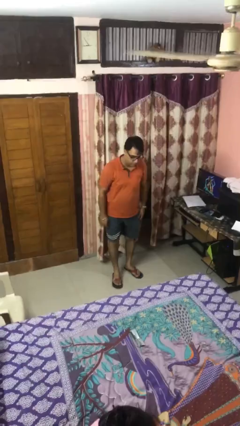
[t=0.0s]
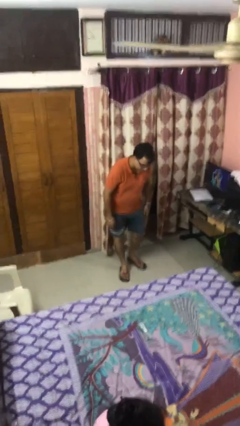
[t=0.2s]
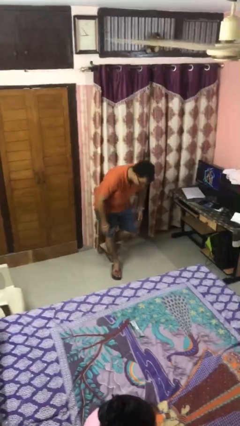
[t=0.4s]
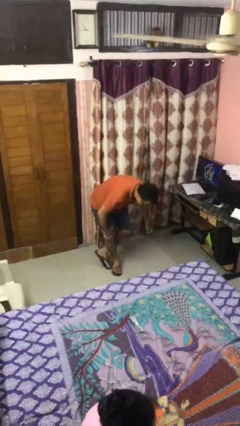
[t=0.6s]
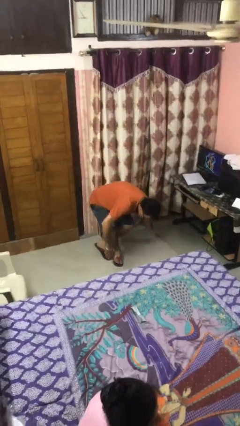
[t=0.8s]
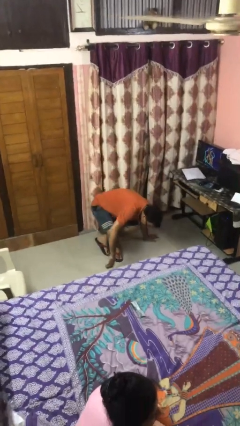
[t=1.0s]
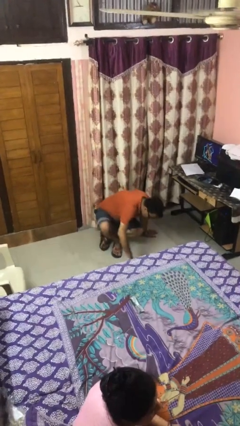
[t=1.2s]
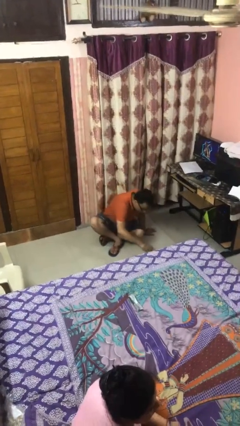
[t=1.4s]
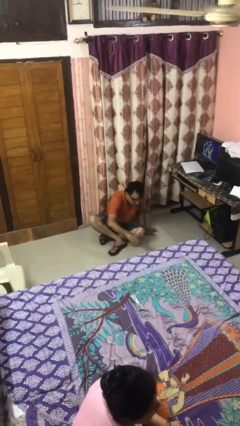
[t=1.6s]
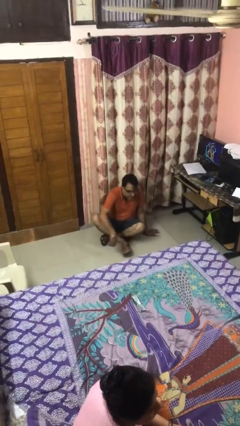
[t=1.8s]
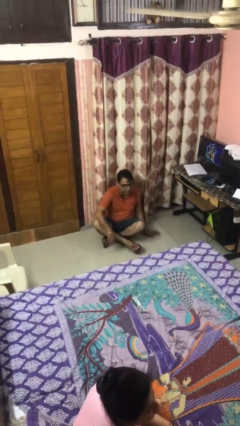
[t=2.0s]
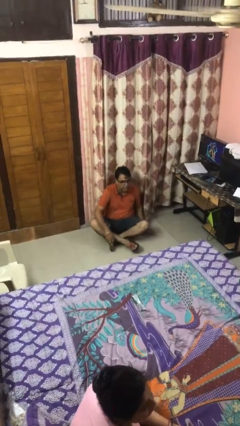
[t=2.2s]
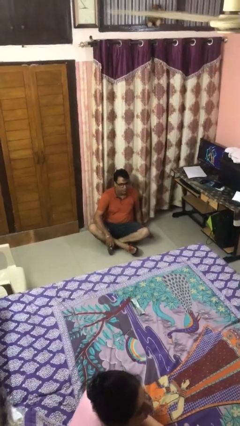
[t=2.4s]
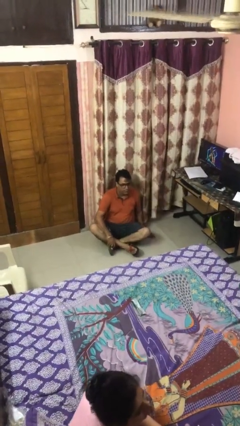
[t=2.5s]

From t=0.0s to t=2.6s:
person sits crisscross

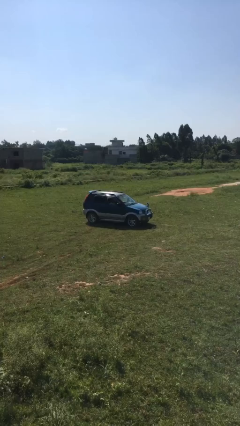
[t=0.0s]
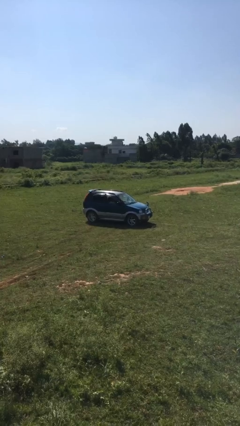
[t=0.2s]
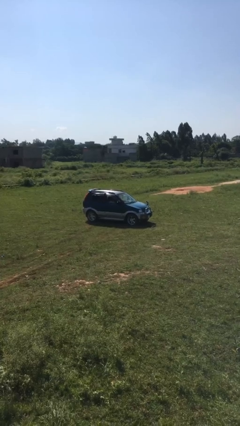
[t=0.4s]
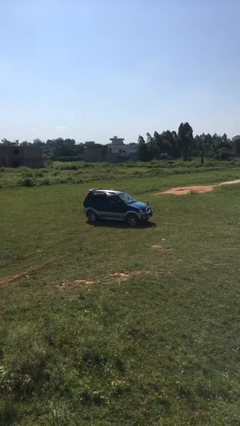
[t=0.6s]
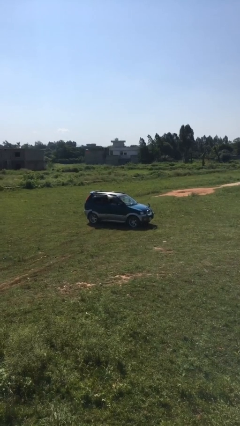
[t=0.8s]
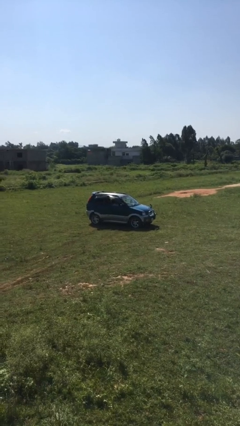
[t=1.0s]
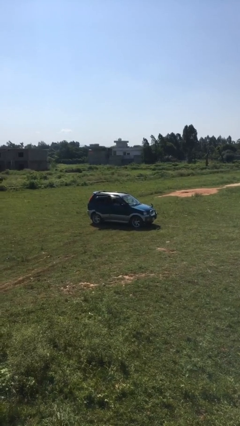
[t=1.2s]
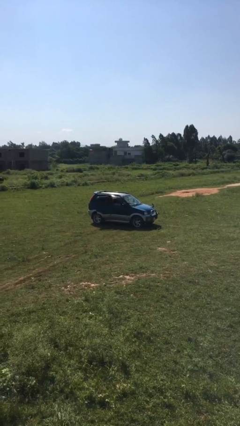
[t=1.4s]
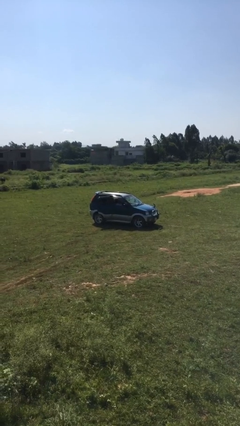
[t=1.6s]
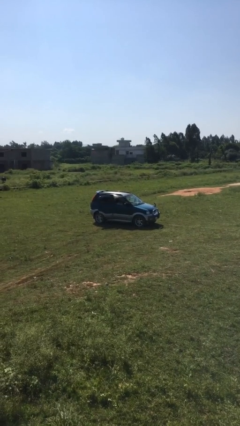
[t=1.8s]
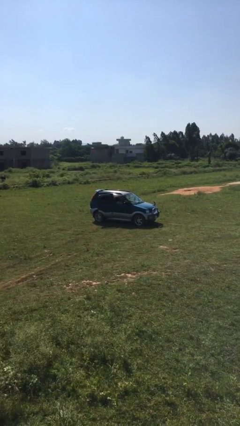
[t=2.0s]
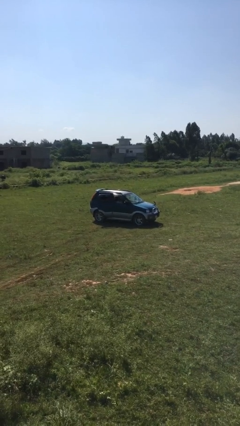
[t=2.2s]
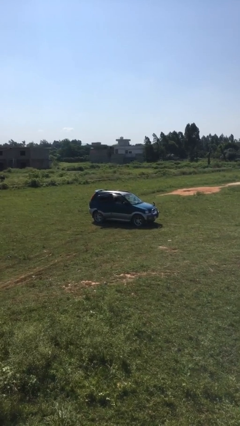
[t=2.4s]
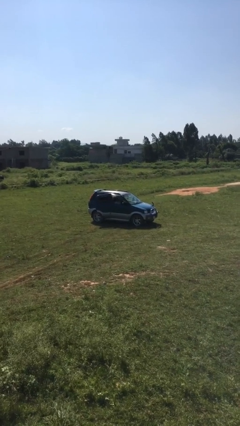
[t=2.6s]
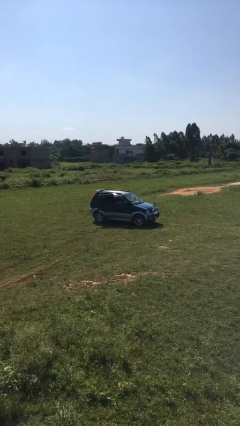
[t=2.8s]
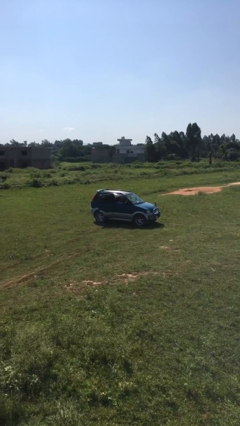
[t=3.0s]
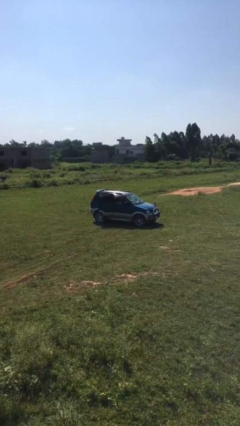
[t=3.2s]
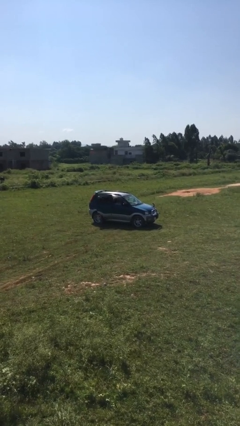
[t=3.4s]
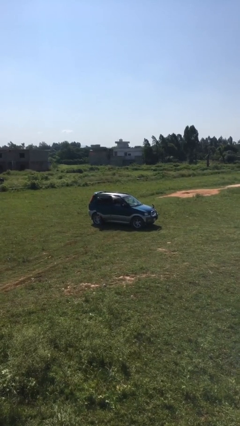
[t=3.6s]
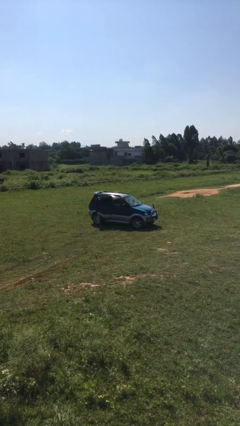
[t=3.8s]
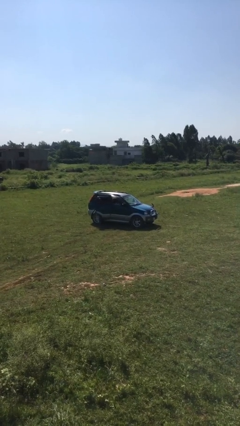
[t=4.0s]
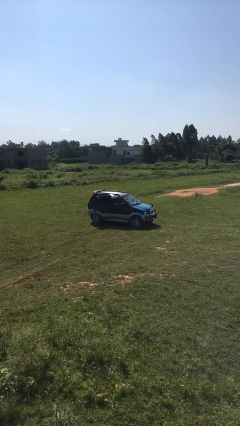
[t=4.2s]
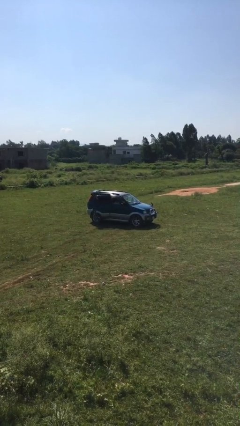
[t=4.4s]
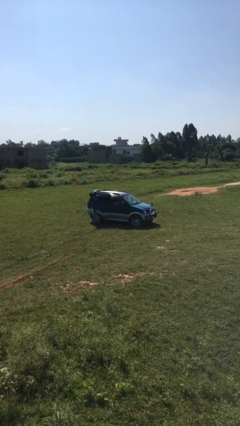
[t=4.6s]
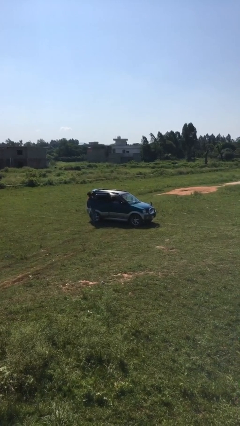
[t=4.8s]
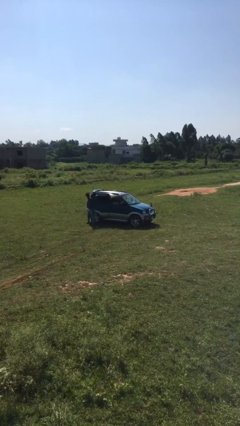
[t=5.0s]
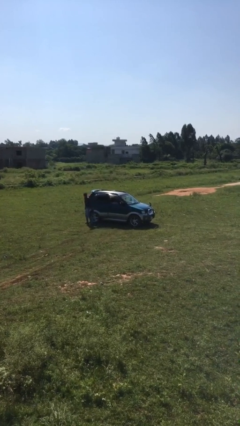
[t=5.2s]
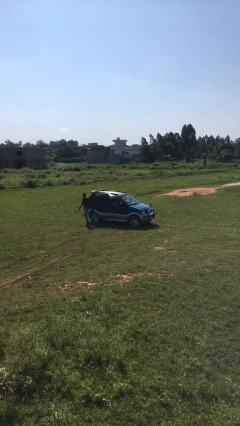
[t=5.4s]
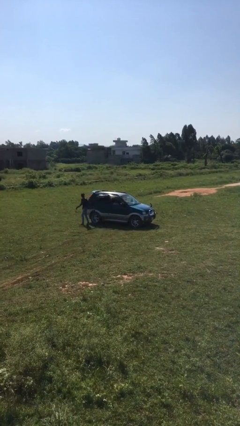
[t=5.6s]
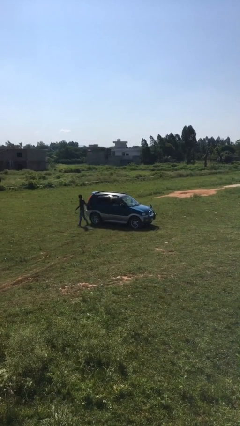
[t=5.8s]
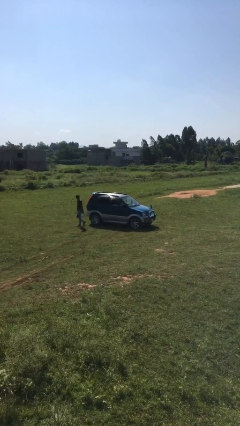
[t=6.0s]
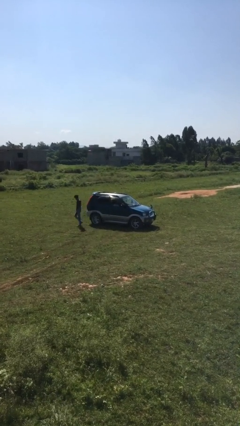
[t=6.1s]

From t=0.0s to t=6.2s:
car drops off person

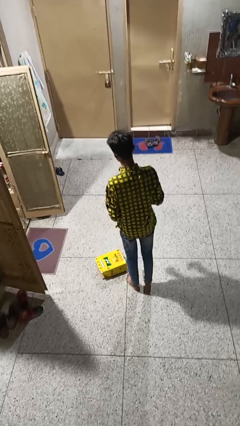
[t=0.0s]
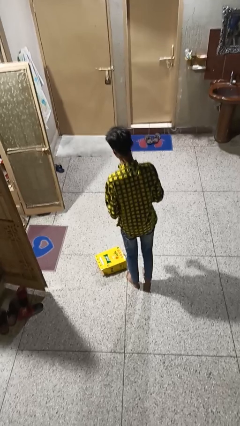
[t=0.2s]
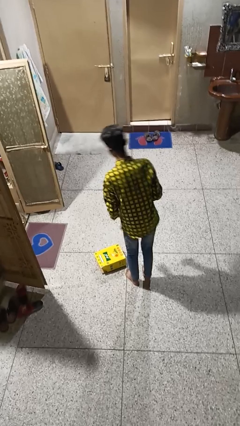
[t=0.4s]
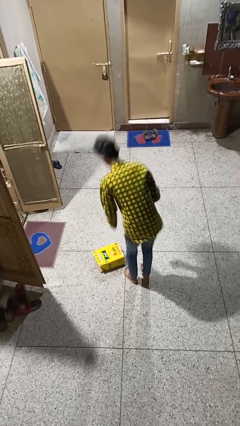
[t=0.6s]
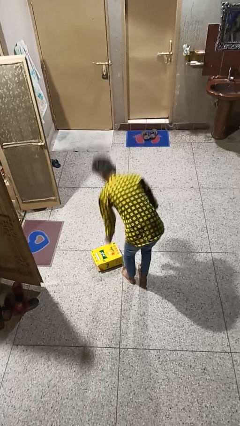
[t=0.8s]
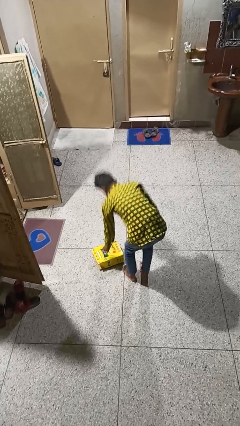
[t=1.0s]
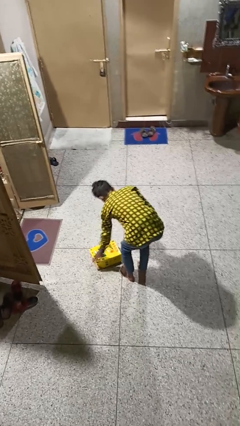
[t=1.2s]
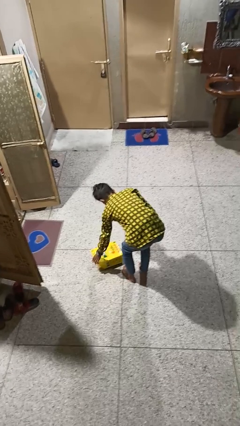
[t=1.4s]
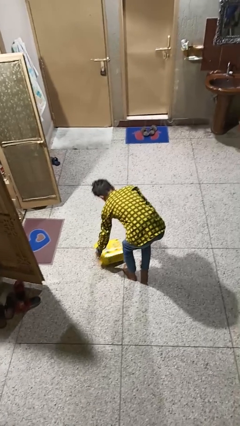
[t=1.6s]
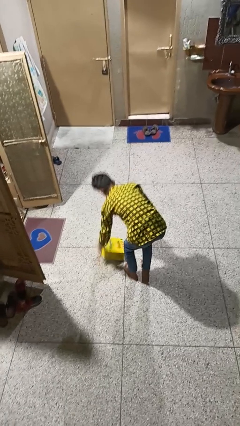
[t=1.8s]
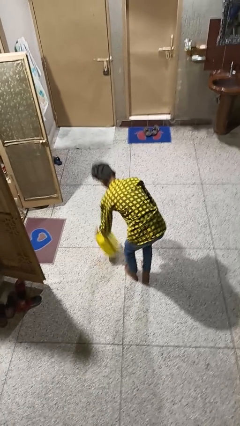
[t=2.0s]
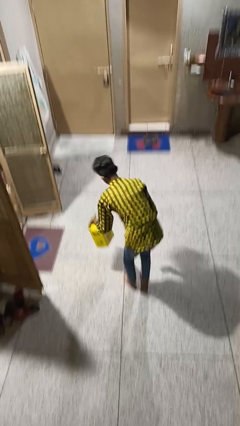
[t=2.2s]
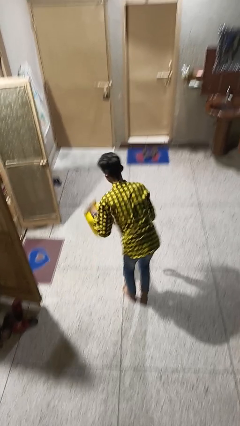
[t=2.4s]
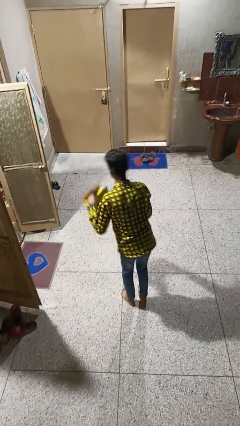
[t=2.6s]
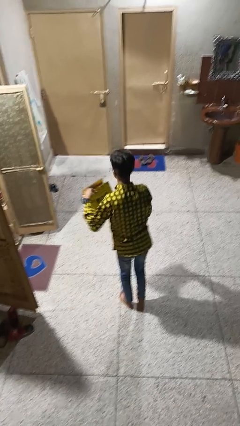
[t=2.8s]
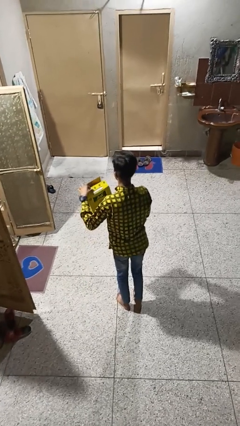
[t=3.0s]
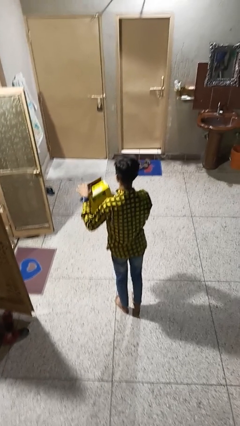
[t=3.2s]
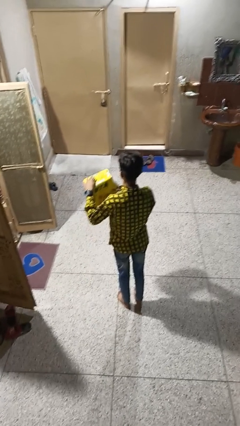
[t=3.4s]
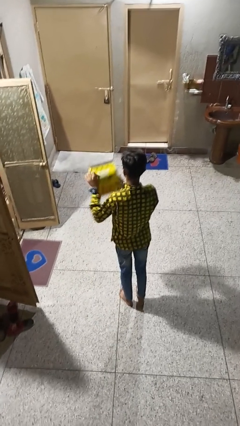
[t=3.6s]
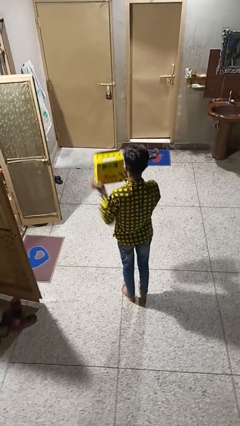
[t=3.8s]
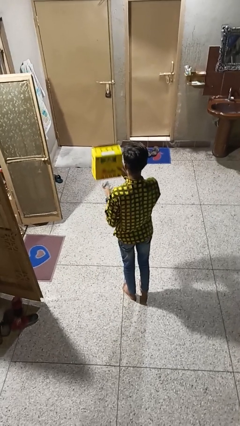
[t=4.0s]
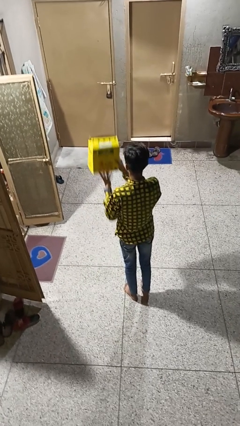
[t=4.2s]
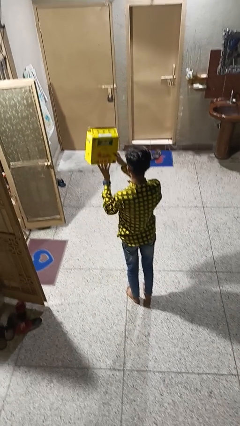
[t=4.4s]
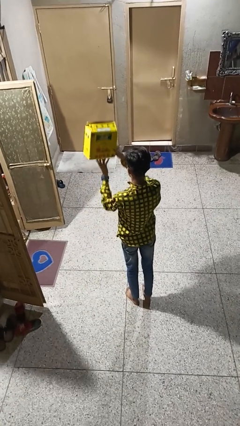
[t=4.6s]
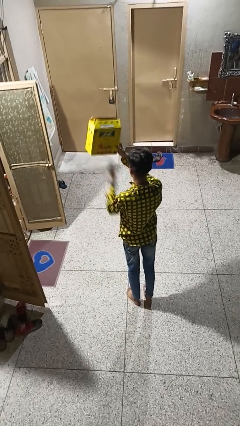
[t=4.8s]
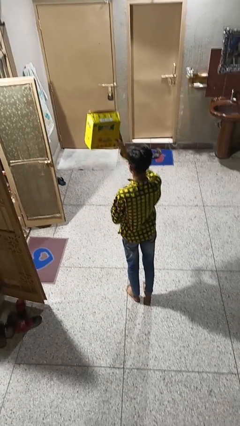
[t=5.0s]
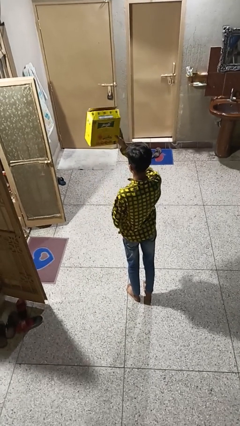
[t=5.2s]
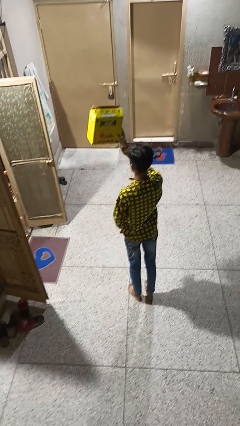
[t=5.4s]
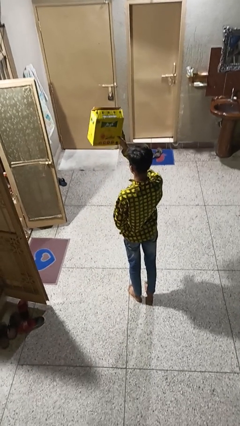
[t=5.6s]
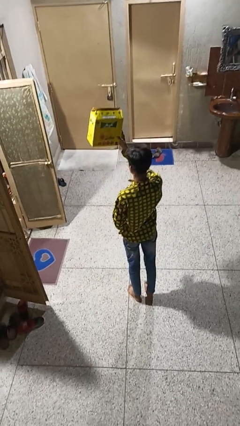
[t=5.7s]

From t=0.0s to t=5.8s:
person picks up object from floor

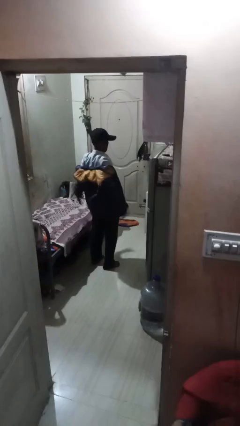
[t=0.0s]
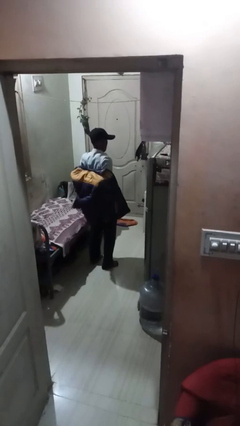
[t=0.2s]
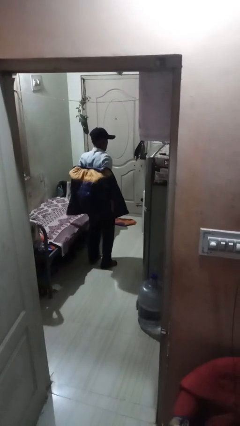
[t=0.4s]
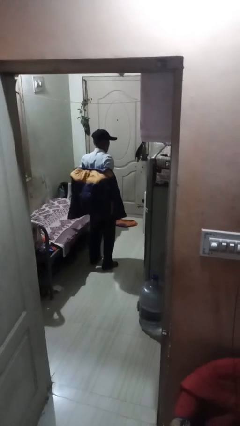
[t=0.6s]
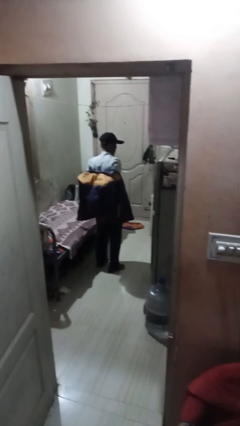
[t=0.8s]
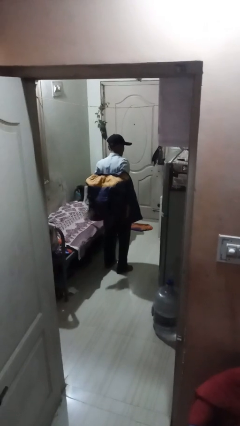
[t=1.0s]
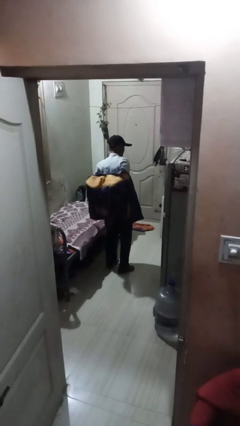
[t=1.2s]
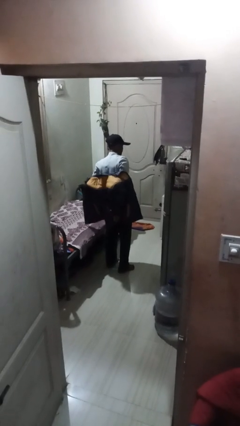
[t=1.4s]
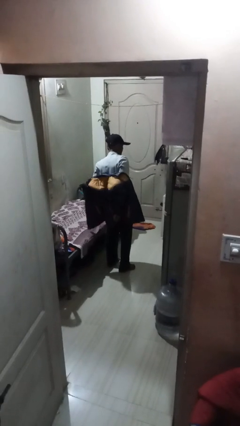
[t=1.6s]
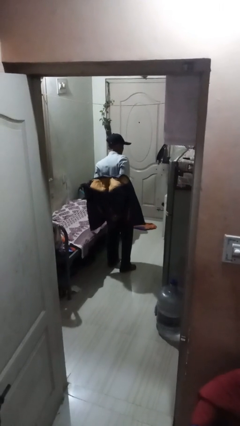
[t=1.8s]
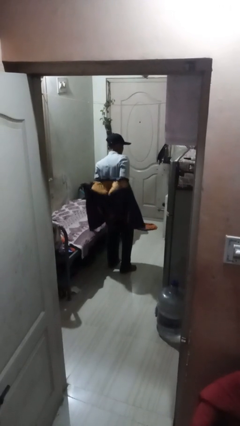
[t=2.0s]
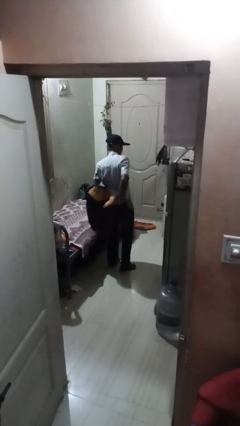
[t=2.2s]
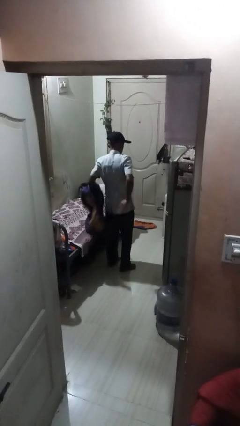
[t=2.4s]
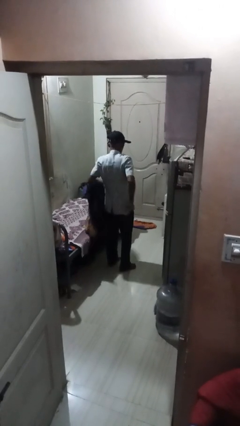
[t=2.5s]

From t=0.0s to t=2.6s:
person takes off jacket

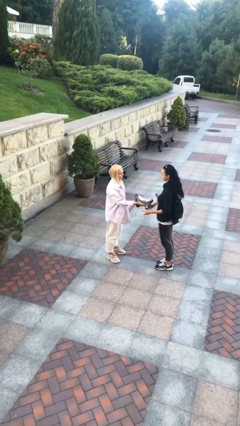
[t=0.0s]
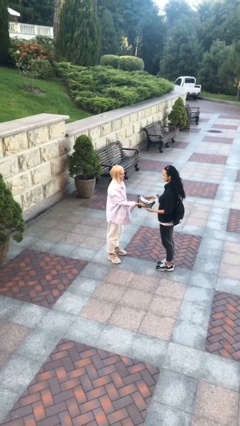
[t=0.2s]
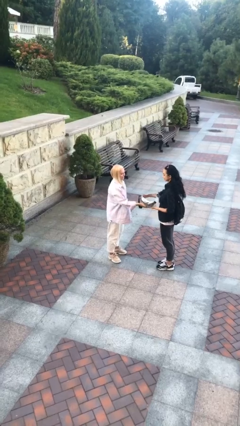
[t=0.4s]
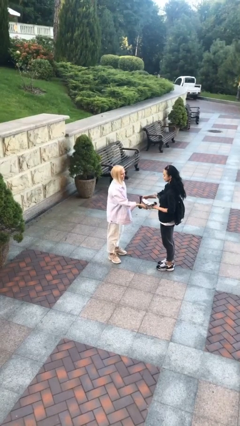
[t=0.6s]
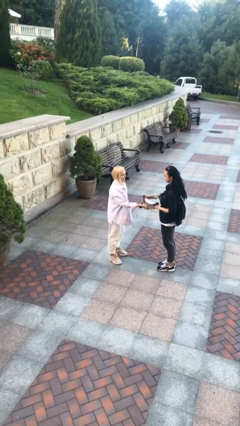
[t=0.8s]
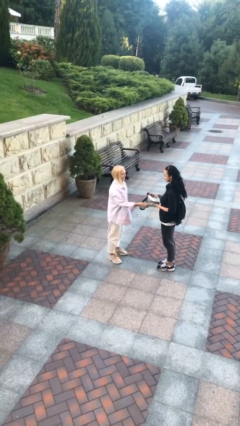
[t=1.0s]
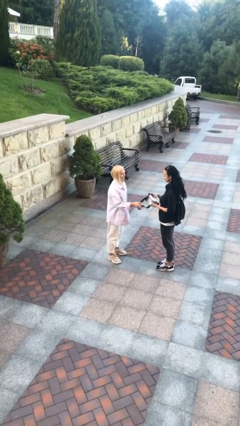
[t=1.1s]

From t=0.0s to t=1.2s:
person transfers object to person
